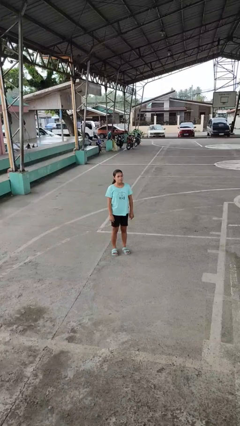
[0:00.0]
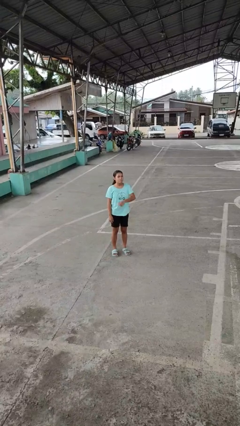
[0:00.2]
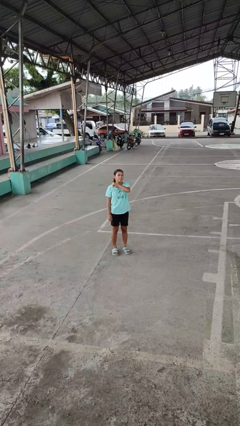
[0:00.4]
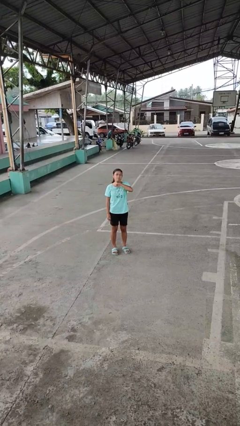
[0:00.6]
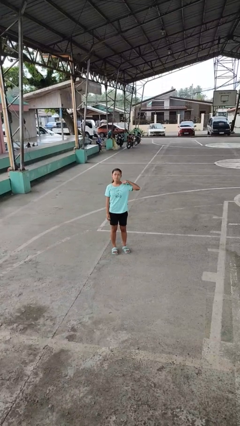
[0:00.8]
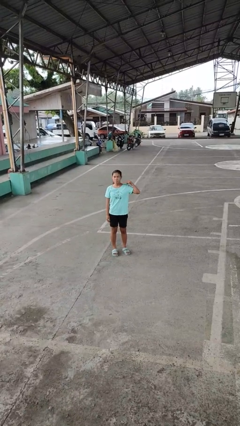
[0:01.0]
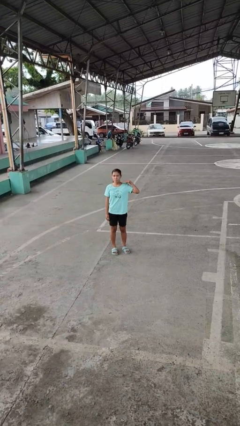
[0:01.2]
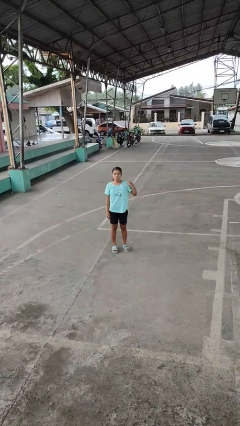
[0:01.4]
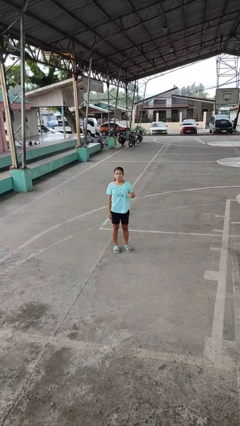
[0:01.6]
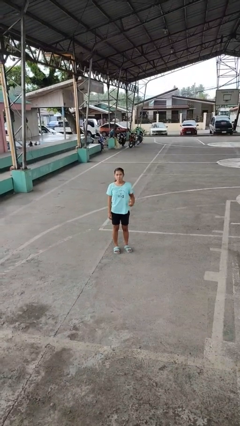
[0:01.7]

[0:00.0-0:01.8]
person gestures cut

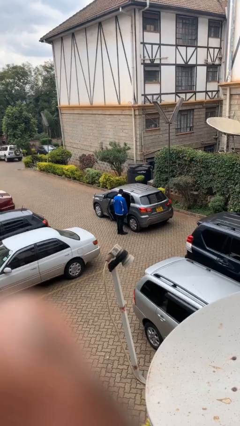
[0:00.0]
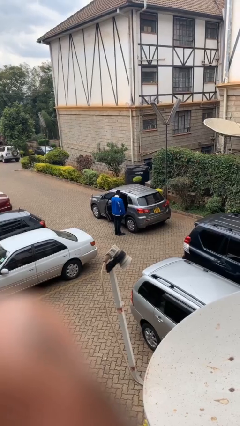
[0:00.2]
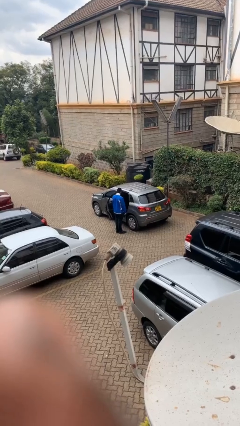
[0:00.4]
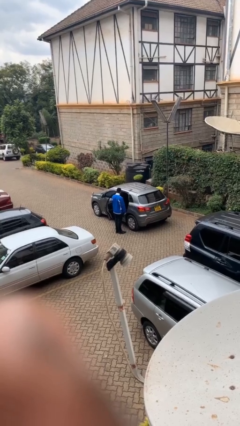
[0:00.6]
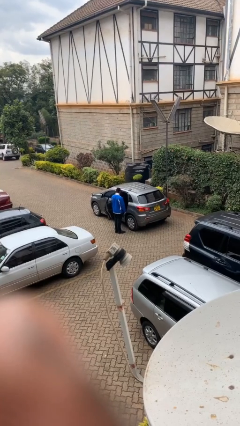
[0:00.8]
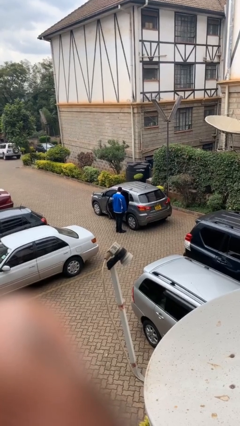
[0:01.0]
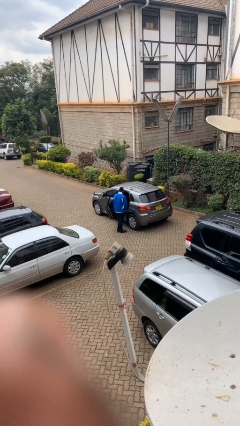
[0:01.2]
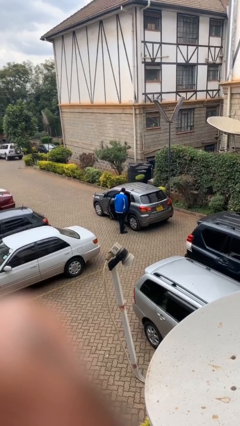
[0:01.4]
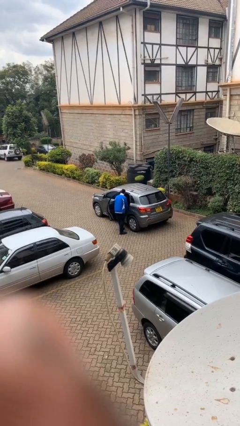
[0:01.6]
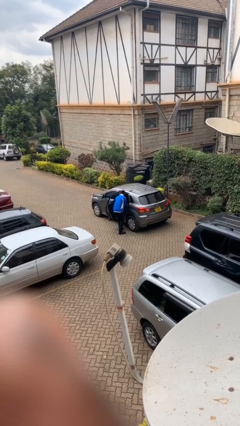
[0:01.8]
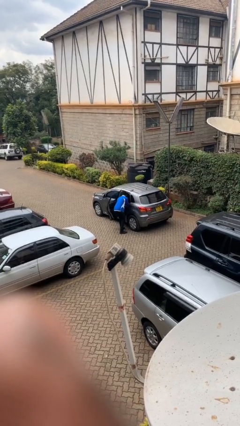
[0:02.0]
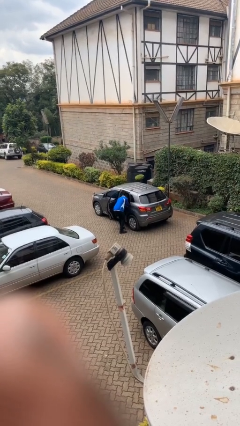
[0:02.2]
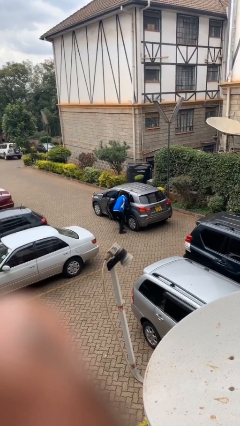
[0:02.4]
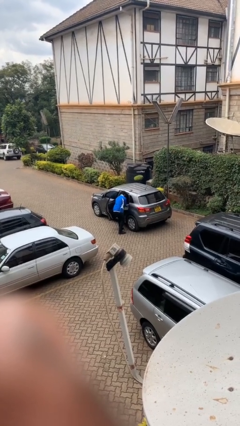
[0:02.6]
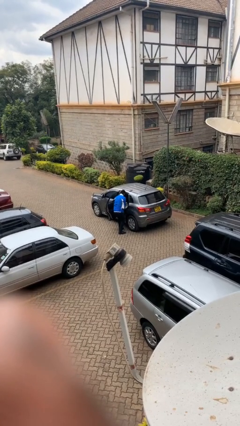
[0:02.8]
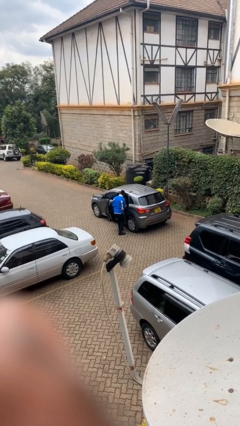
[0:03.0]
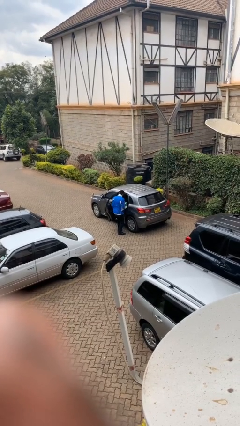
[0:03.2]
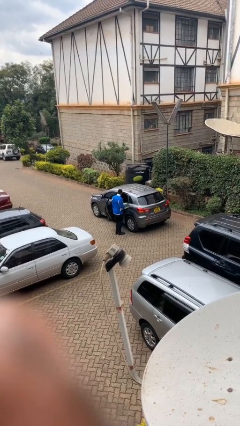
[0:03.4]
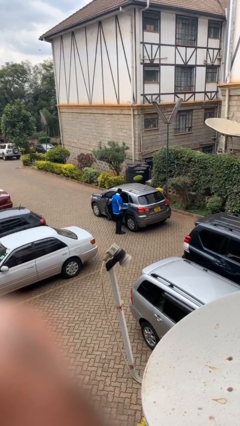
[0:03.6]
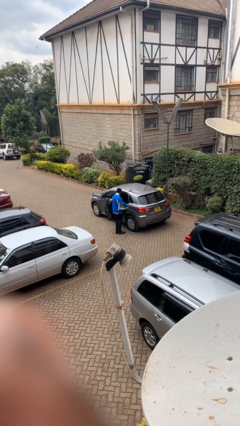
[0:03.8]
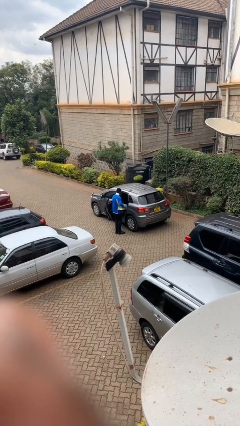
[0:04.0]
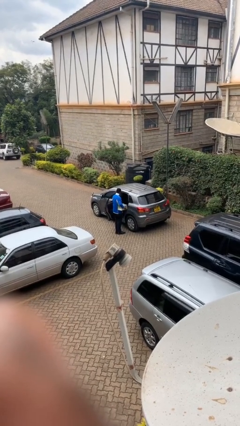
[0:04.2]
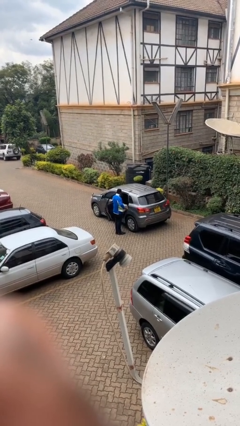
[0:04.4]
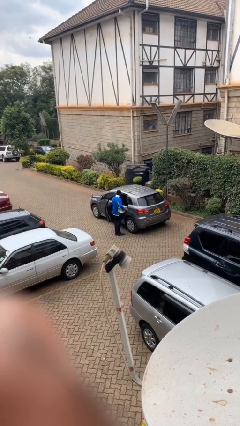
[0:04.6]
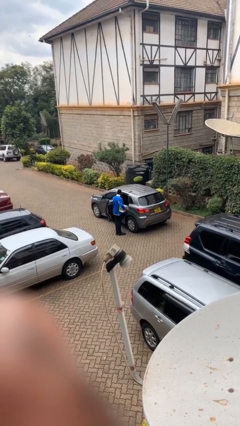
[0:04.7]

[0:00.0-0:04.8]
person unloads car

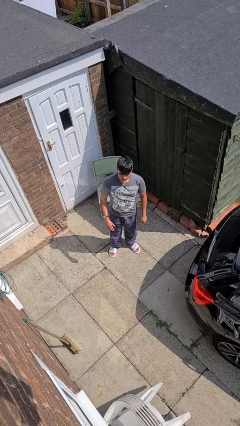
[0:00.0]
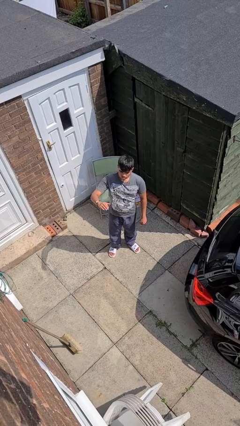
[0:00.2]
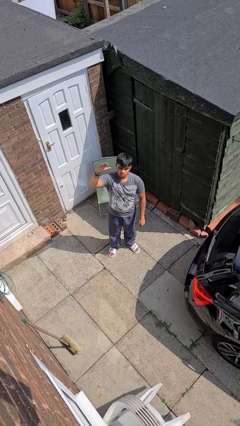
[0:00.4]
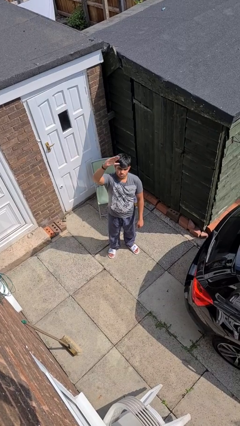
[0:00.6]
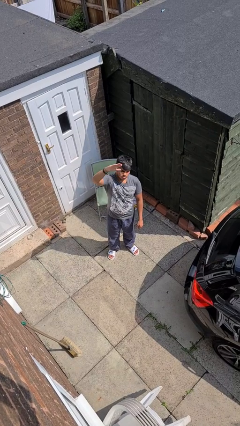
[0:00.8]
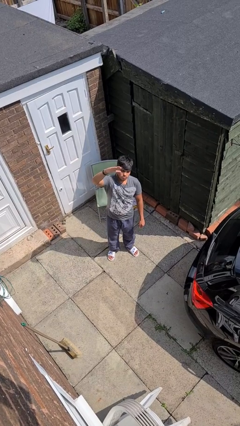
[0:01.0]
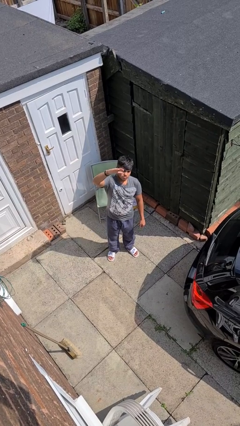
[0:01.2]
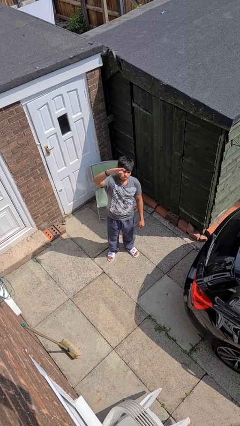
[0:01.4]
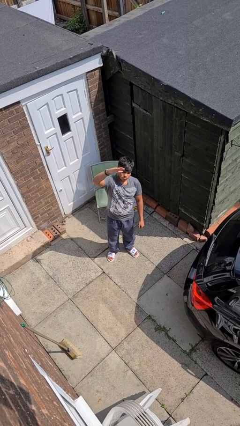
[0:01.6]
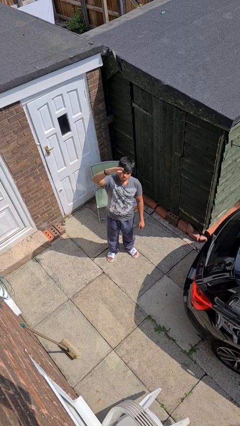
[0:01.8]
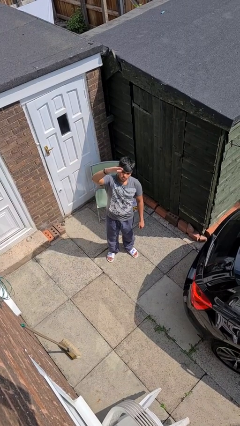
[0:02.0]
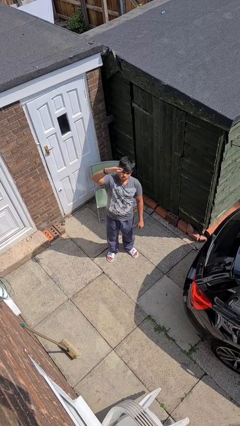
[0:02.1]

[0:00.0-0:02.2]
person gestures raise hand

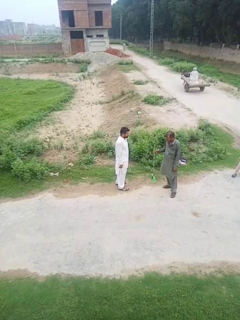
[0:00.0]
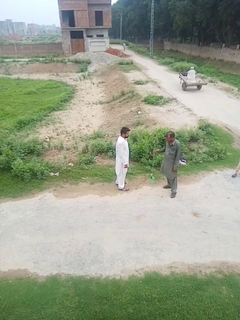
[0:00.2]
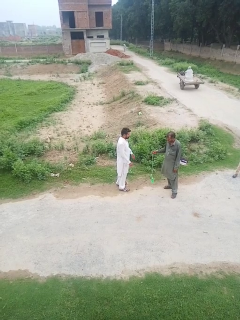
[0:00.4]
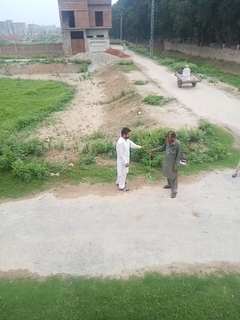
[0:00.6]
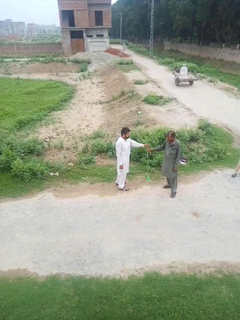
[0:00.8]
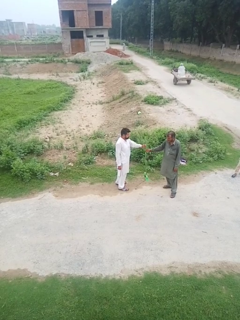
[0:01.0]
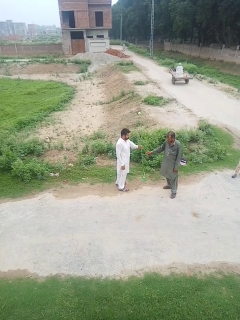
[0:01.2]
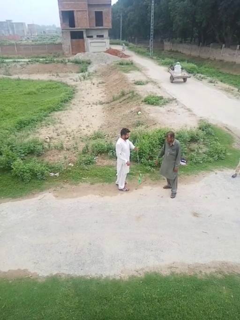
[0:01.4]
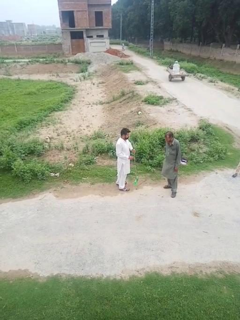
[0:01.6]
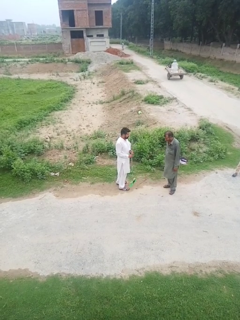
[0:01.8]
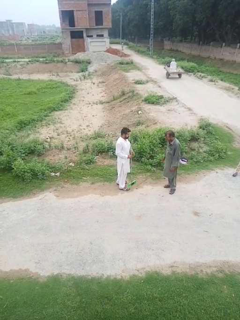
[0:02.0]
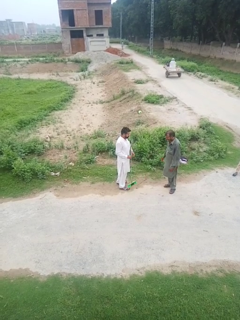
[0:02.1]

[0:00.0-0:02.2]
person transfers object to person

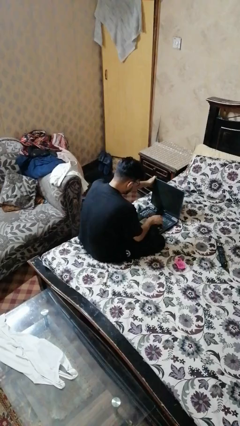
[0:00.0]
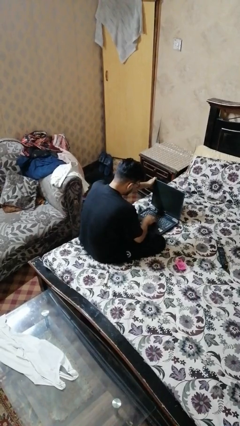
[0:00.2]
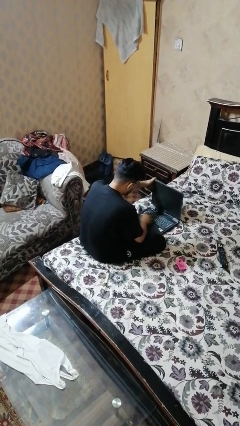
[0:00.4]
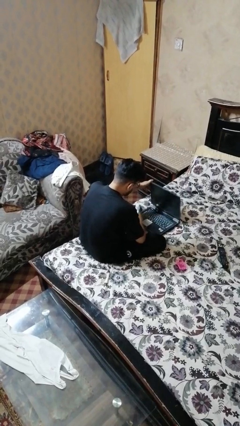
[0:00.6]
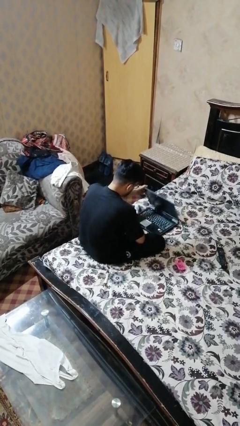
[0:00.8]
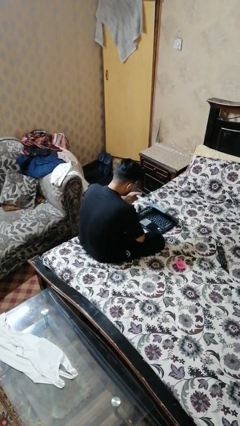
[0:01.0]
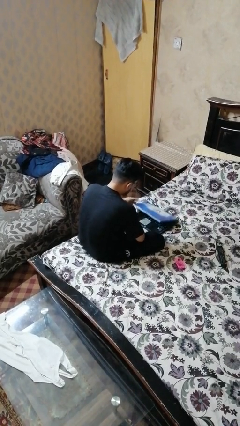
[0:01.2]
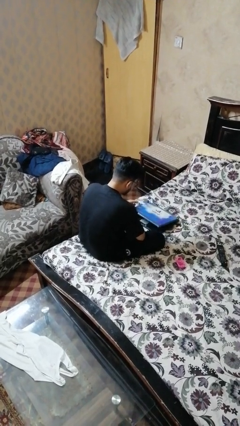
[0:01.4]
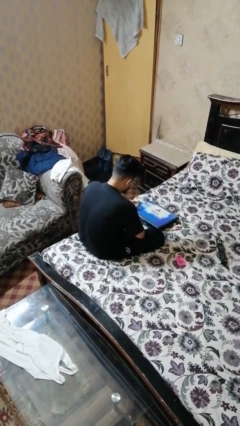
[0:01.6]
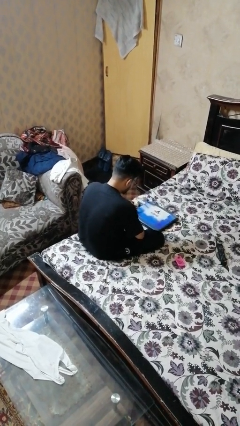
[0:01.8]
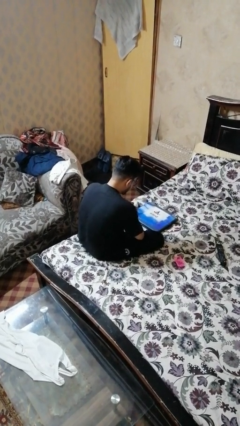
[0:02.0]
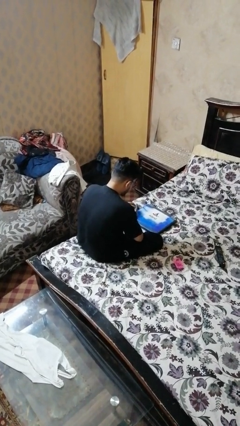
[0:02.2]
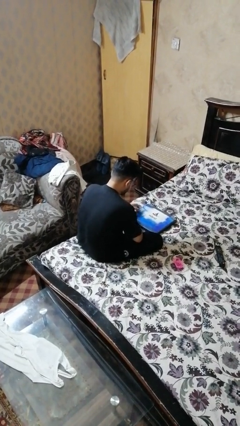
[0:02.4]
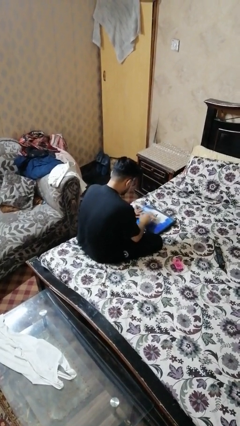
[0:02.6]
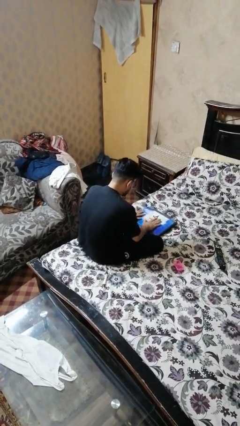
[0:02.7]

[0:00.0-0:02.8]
person closes laptop

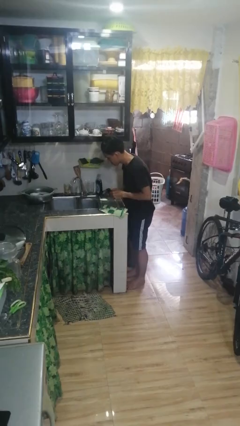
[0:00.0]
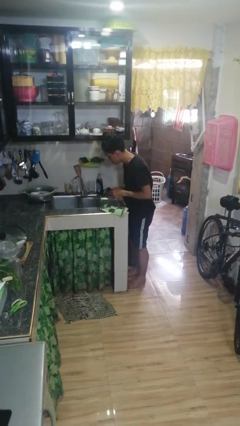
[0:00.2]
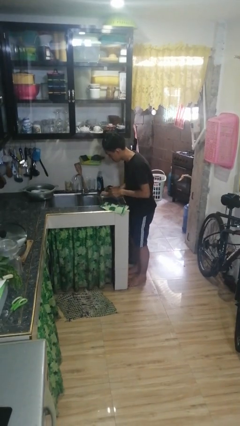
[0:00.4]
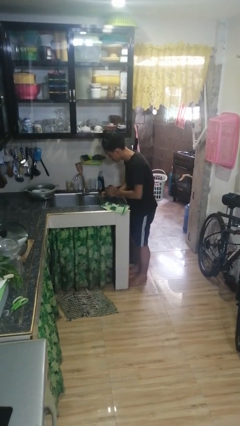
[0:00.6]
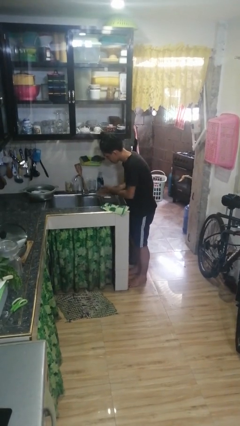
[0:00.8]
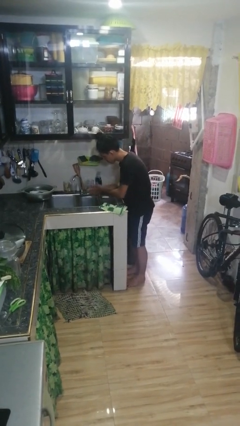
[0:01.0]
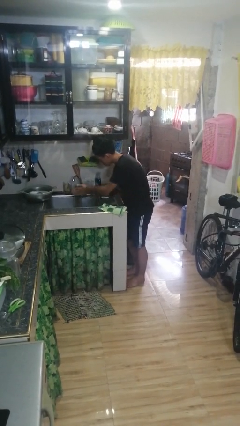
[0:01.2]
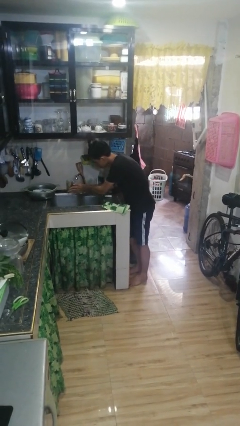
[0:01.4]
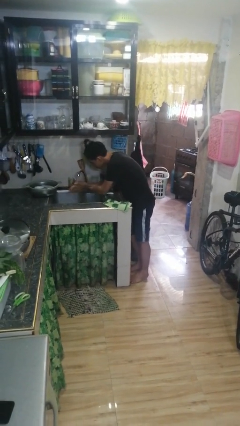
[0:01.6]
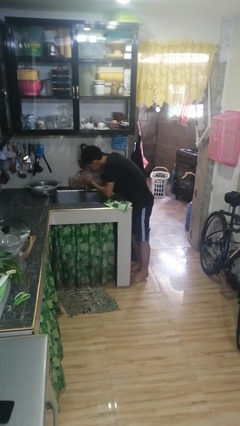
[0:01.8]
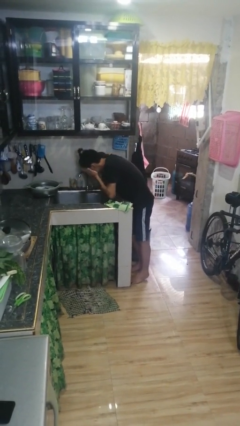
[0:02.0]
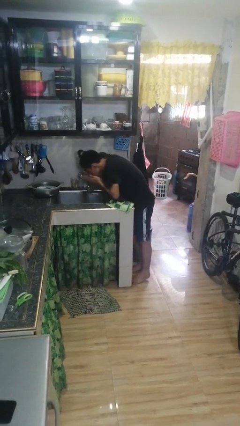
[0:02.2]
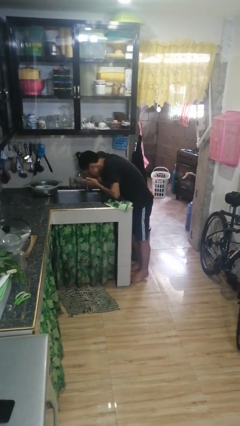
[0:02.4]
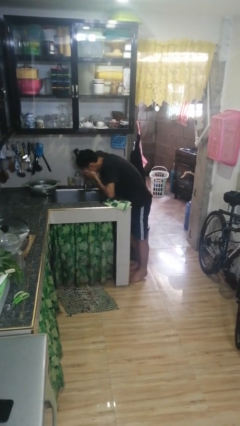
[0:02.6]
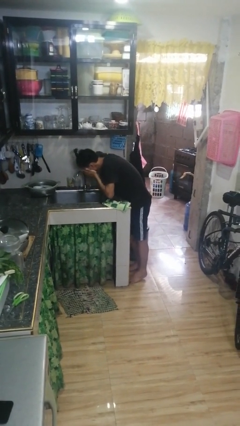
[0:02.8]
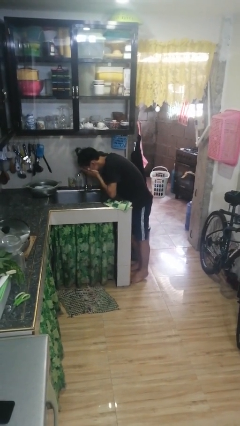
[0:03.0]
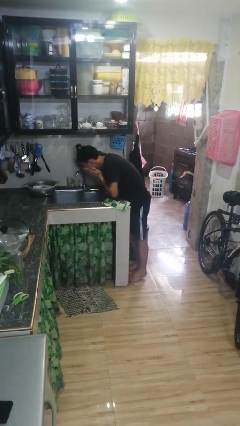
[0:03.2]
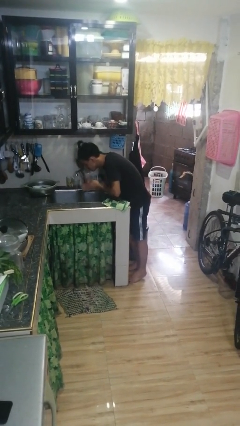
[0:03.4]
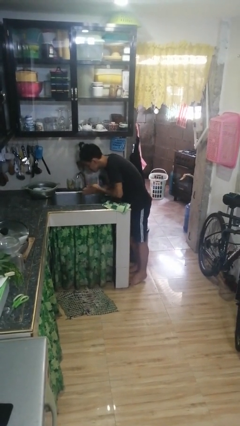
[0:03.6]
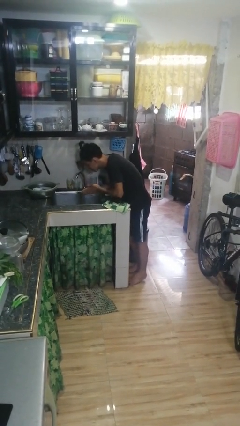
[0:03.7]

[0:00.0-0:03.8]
person washes face
